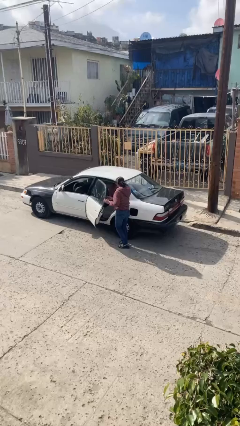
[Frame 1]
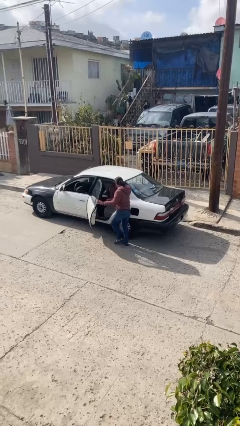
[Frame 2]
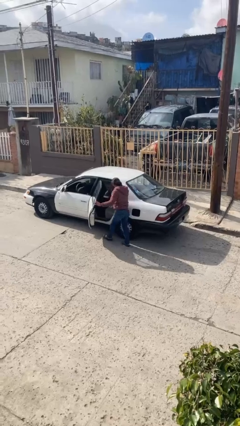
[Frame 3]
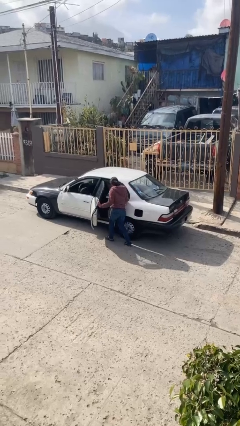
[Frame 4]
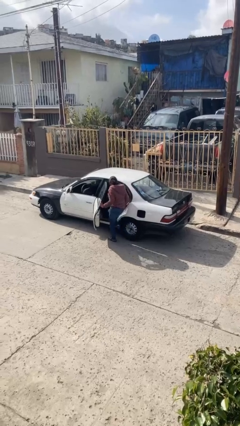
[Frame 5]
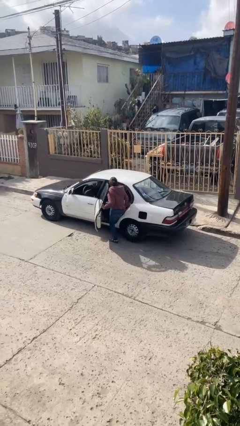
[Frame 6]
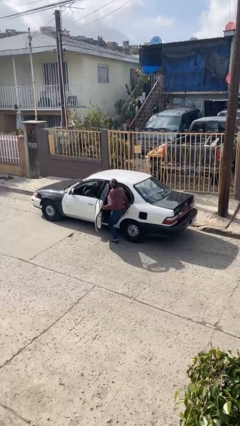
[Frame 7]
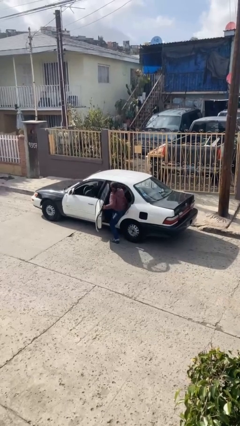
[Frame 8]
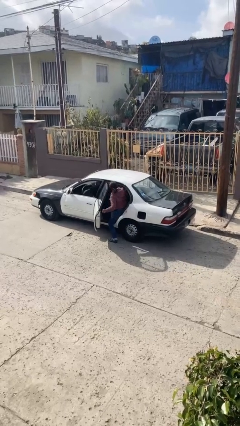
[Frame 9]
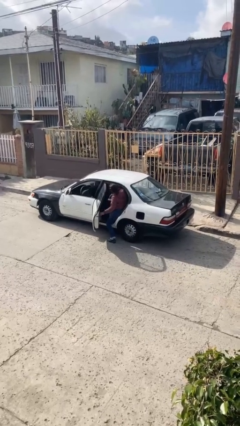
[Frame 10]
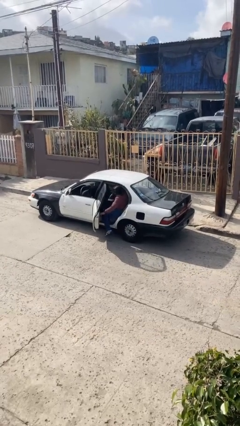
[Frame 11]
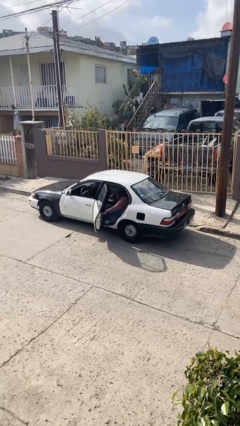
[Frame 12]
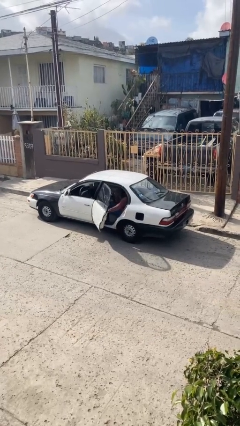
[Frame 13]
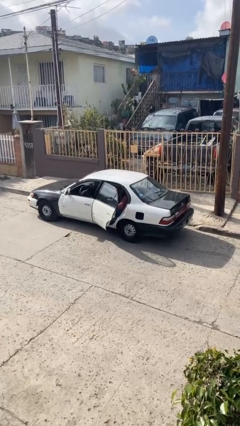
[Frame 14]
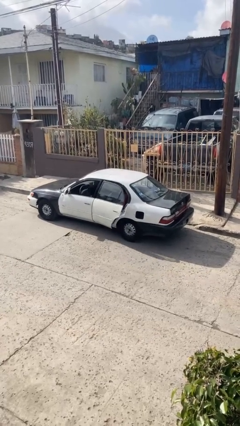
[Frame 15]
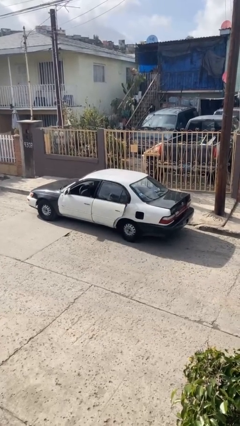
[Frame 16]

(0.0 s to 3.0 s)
person enters car

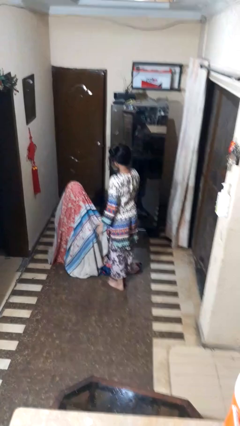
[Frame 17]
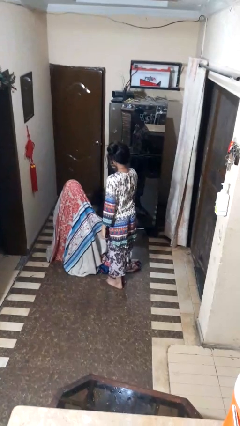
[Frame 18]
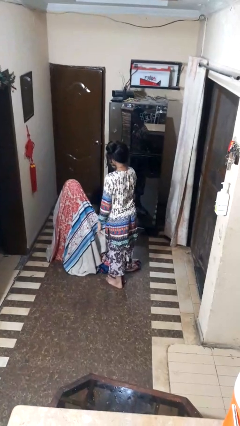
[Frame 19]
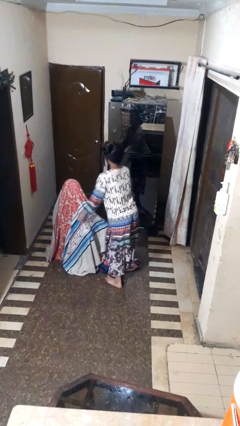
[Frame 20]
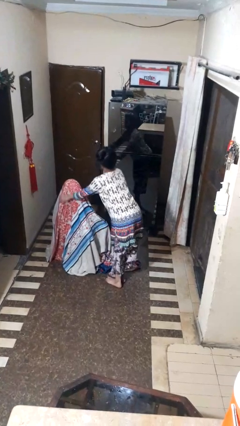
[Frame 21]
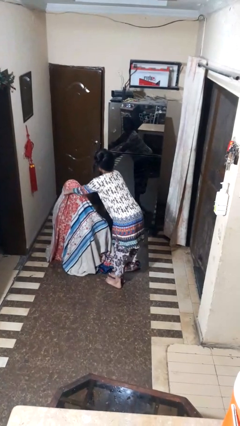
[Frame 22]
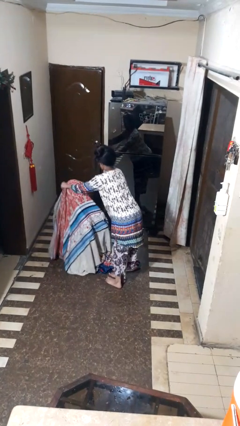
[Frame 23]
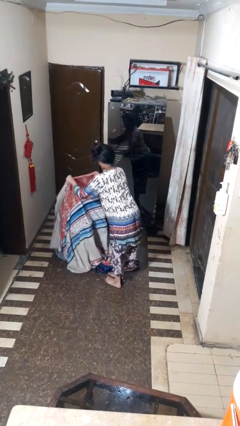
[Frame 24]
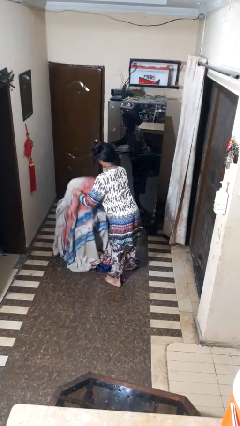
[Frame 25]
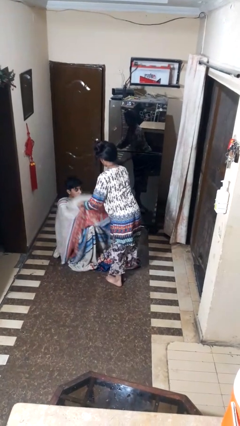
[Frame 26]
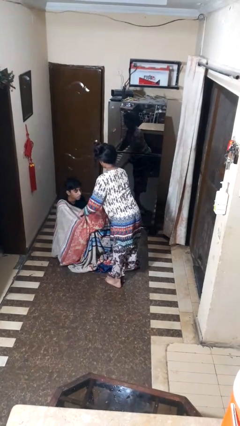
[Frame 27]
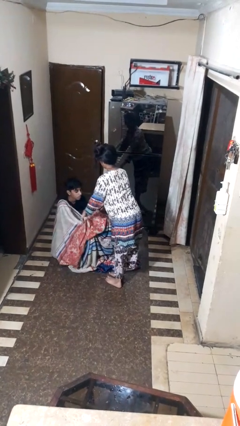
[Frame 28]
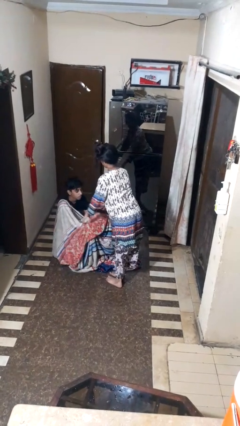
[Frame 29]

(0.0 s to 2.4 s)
person uncovers friend with blanket

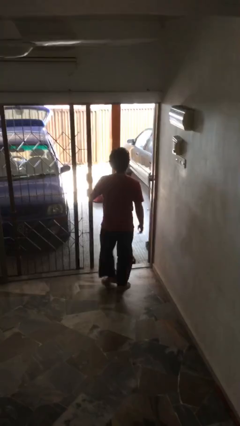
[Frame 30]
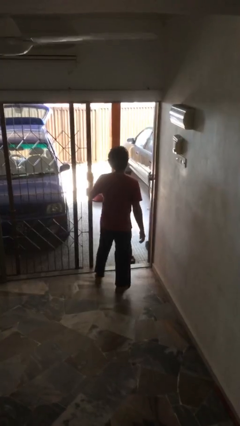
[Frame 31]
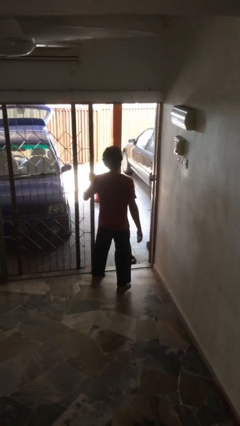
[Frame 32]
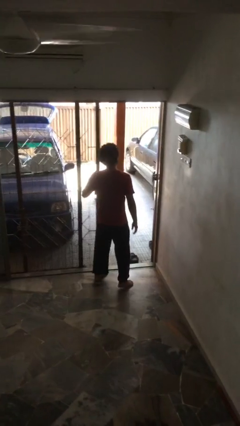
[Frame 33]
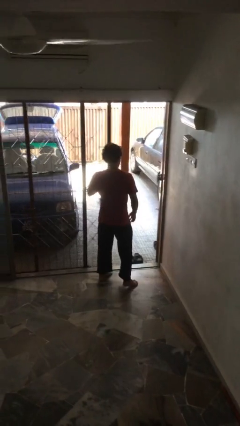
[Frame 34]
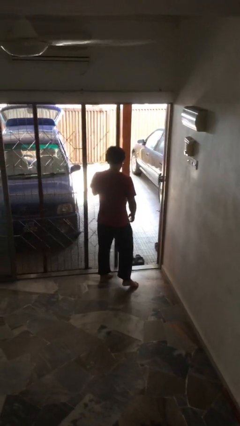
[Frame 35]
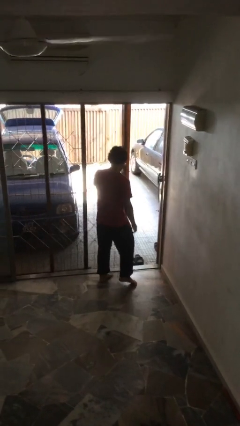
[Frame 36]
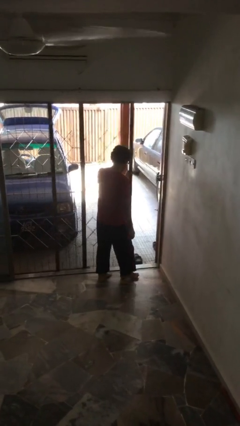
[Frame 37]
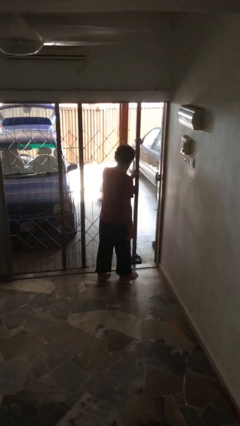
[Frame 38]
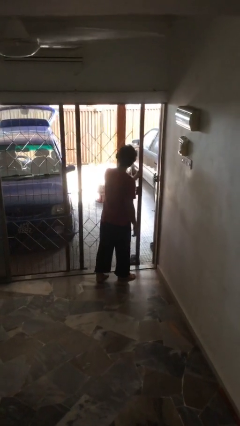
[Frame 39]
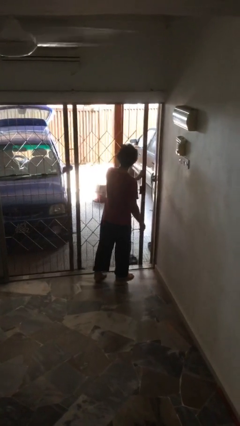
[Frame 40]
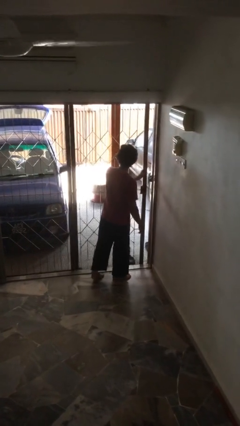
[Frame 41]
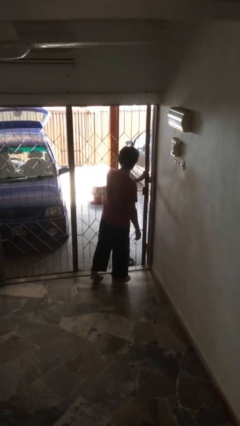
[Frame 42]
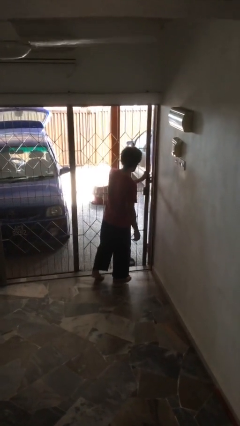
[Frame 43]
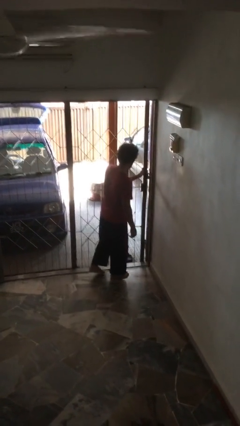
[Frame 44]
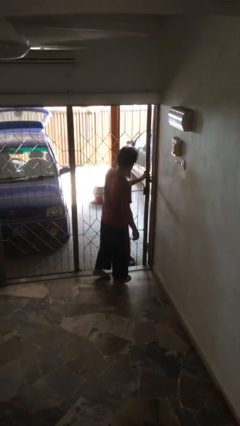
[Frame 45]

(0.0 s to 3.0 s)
person closes facility door

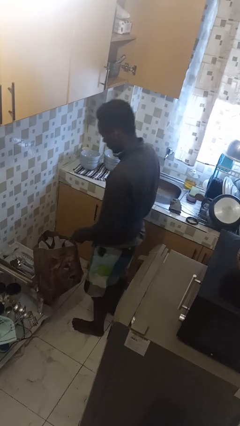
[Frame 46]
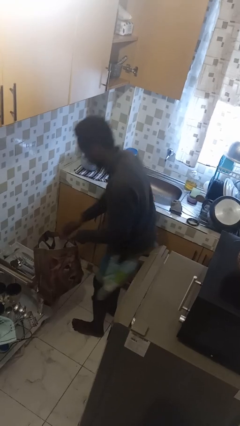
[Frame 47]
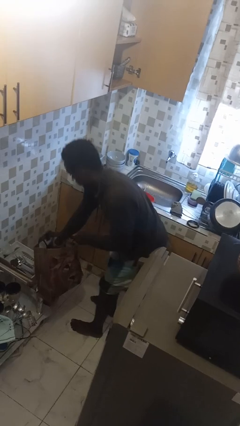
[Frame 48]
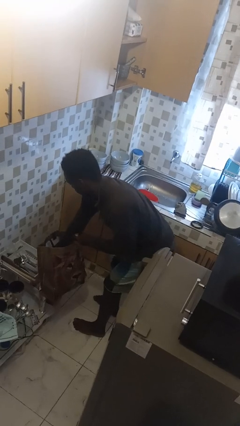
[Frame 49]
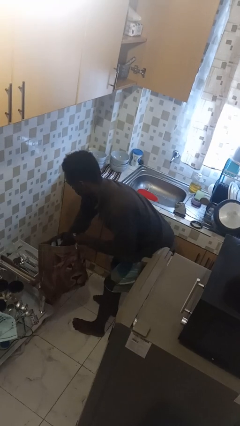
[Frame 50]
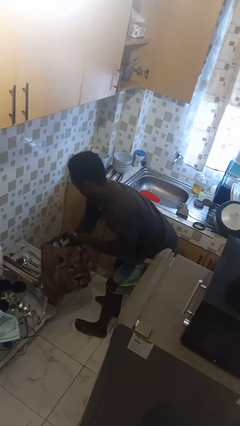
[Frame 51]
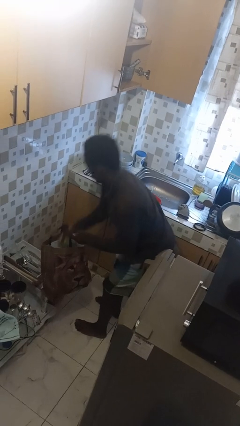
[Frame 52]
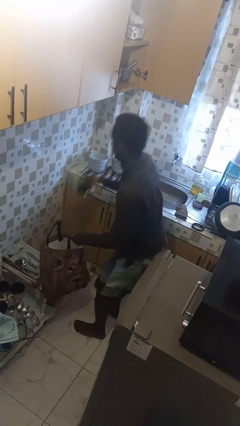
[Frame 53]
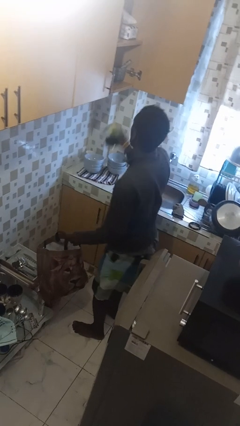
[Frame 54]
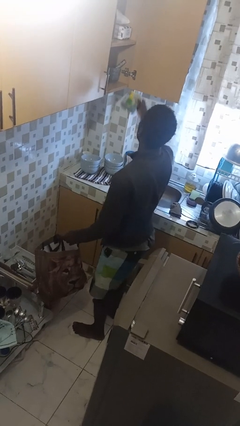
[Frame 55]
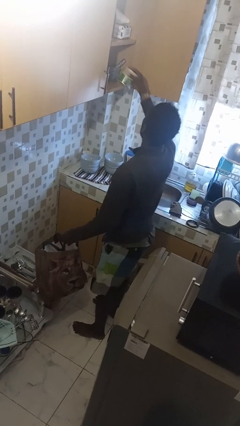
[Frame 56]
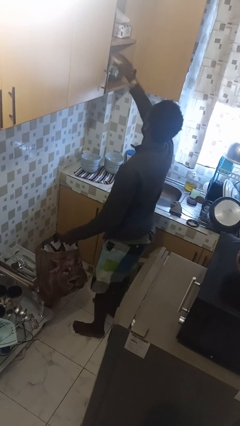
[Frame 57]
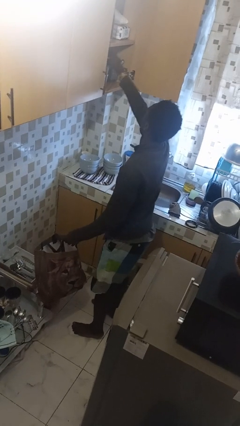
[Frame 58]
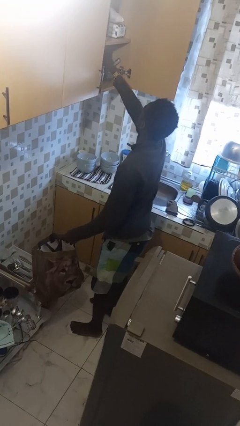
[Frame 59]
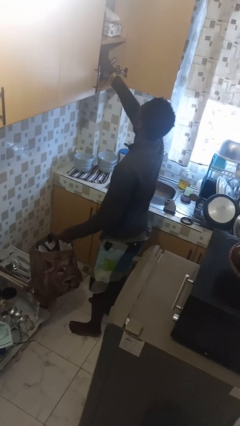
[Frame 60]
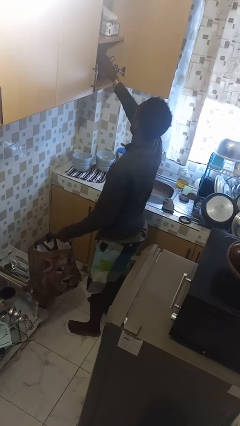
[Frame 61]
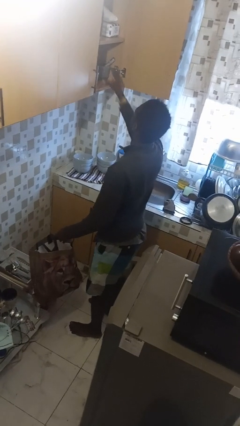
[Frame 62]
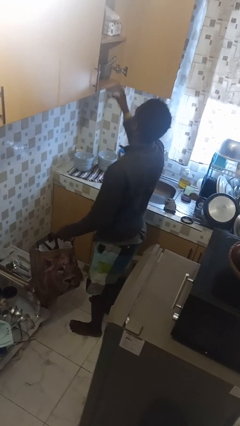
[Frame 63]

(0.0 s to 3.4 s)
person loads groceries into cabinet

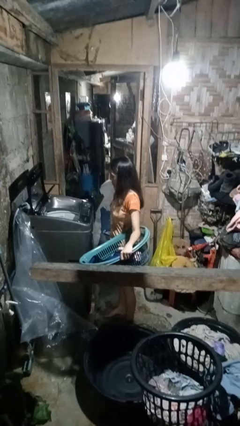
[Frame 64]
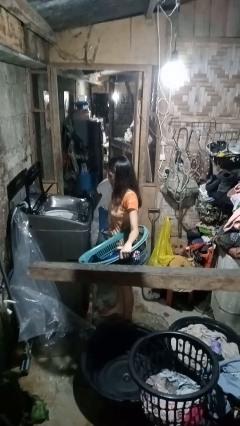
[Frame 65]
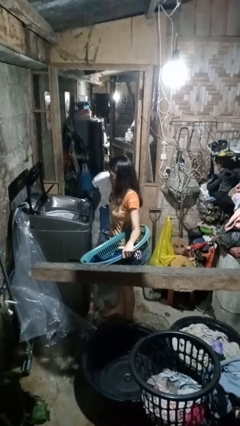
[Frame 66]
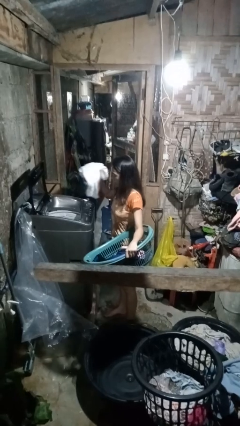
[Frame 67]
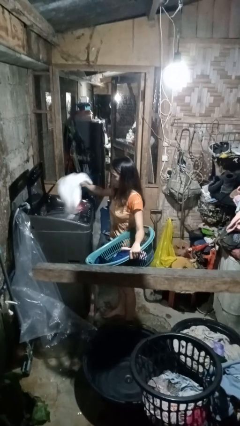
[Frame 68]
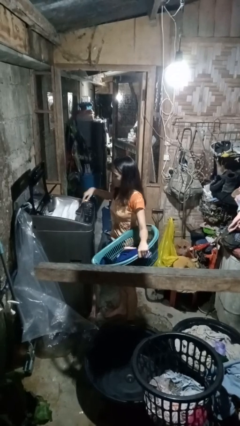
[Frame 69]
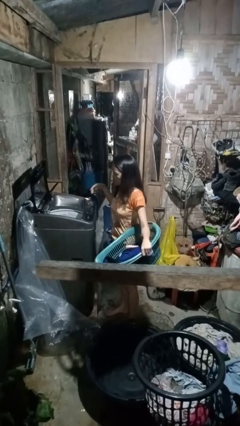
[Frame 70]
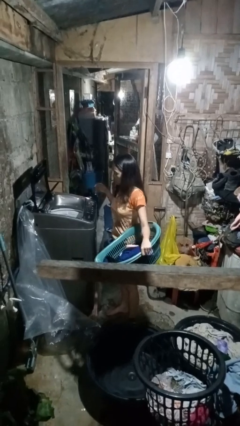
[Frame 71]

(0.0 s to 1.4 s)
person loads clotheswasher

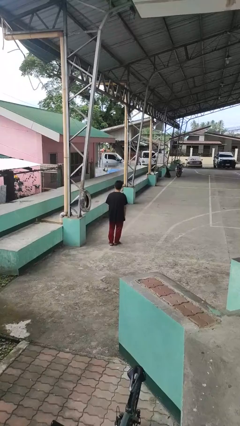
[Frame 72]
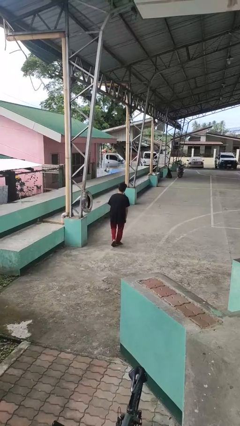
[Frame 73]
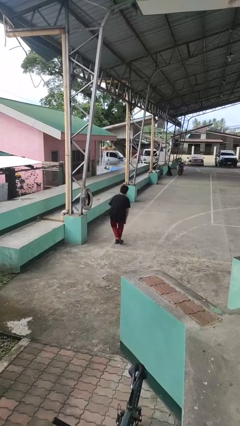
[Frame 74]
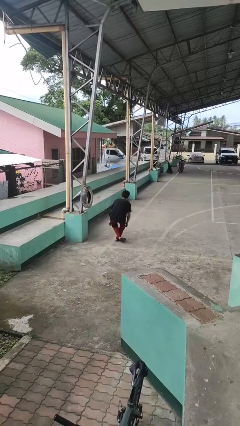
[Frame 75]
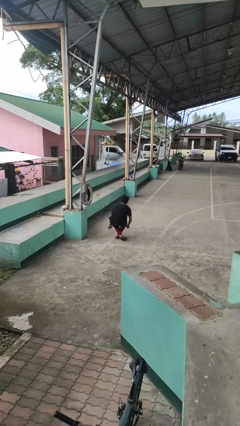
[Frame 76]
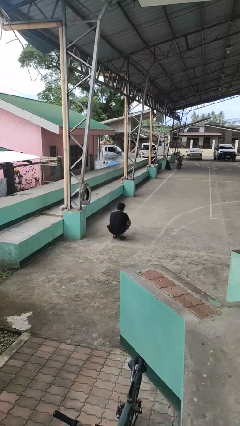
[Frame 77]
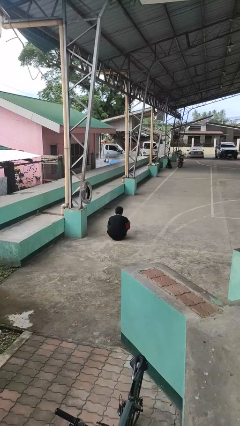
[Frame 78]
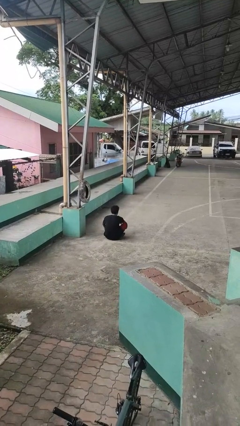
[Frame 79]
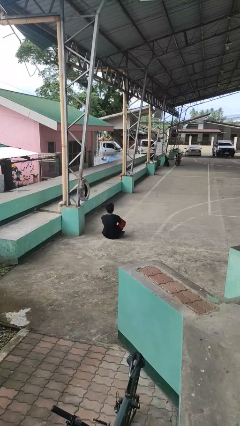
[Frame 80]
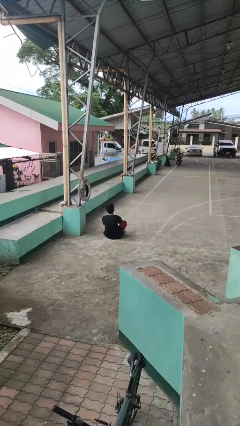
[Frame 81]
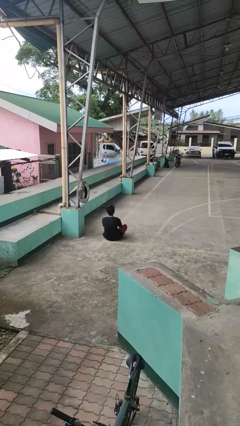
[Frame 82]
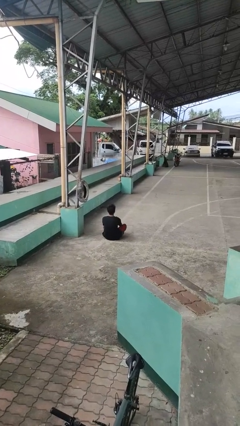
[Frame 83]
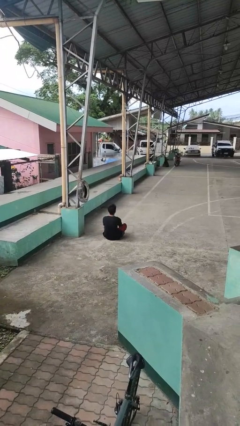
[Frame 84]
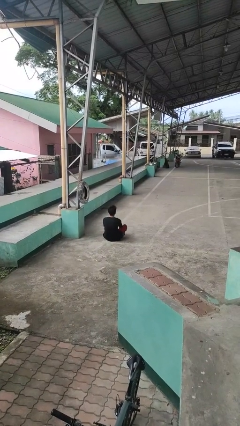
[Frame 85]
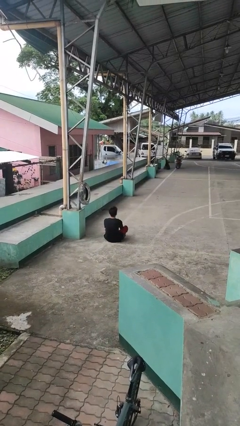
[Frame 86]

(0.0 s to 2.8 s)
person sits crisscross

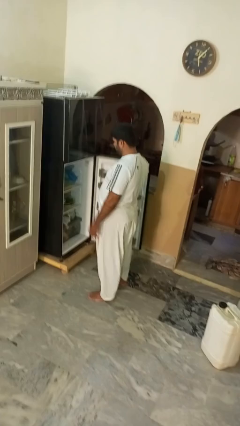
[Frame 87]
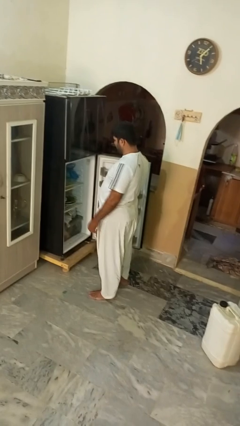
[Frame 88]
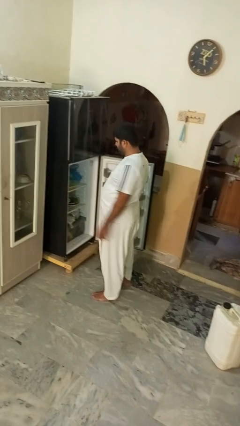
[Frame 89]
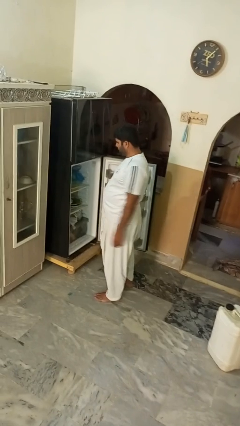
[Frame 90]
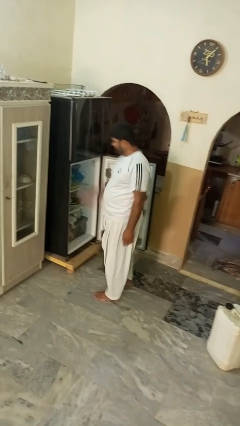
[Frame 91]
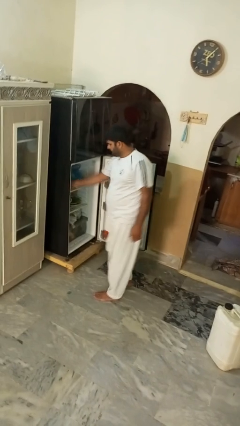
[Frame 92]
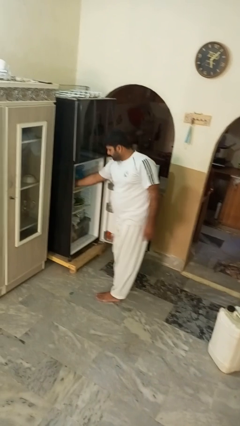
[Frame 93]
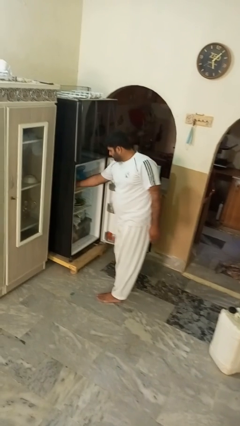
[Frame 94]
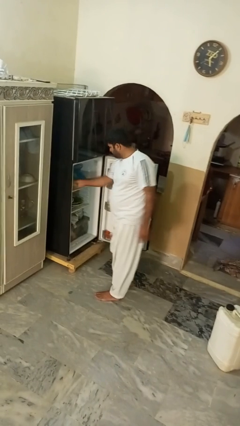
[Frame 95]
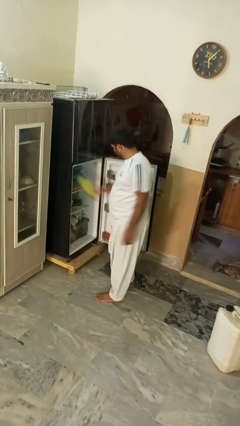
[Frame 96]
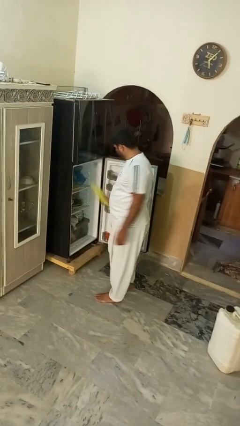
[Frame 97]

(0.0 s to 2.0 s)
person takes object from refrigerator
